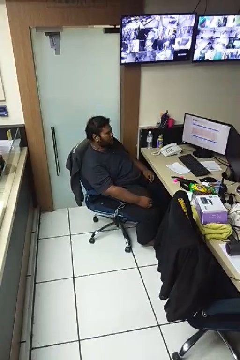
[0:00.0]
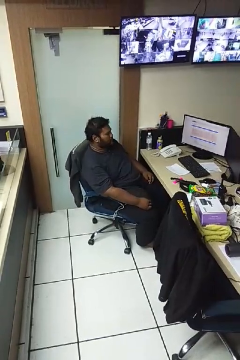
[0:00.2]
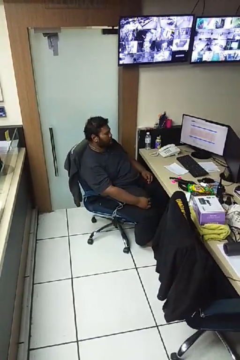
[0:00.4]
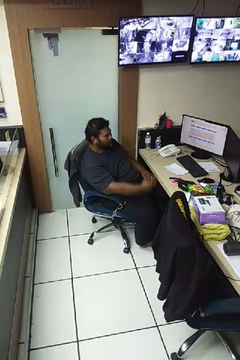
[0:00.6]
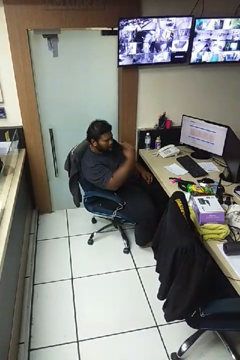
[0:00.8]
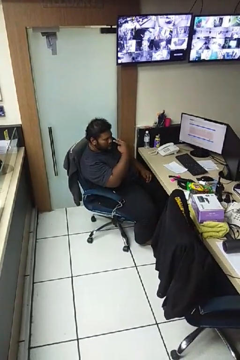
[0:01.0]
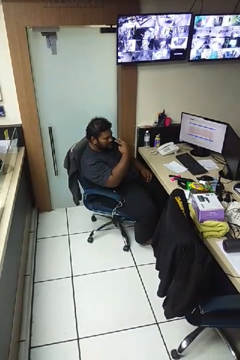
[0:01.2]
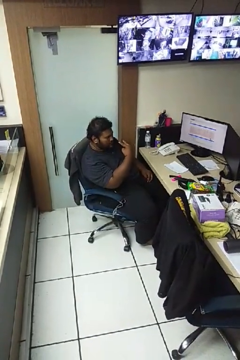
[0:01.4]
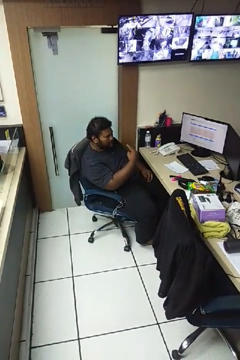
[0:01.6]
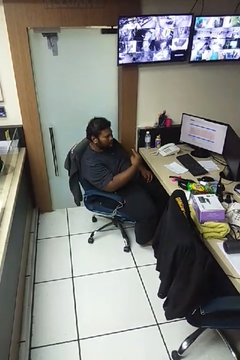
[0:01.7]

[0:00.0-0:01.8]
person gestures watch closely

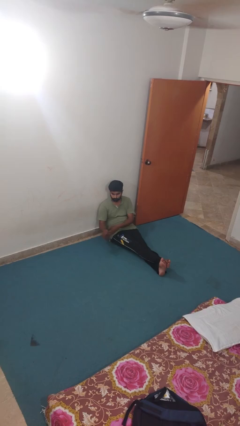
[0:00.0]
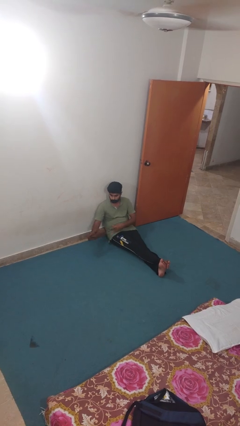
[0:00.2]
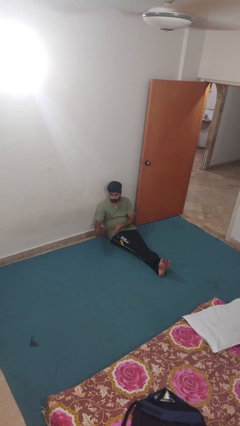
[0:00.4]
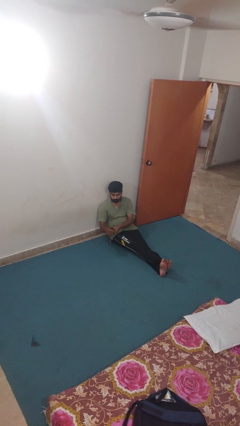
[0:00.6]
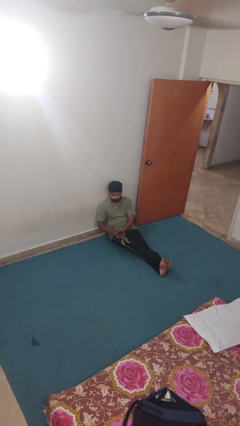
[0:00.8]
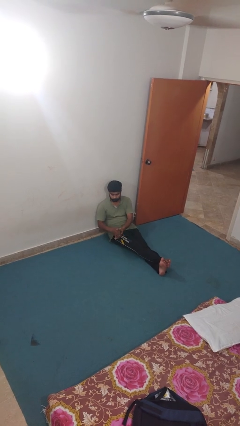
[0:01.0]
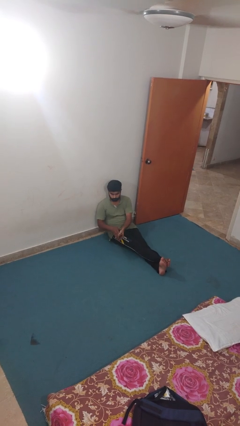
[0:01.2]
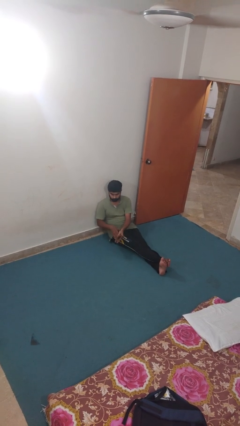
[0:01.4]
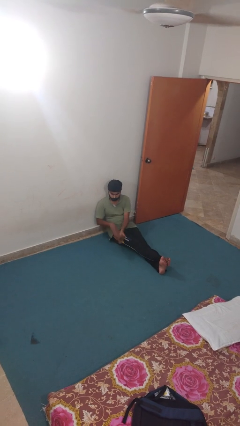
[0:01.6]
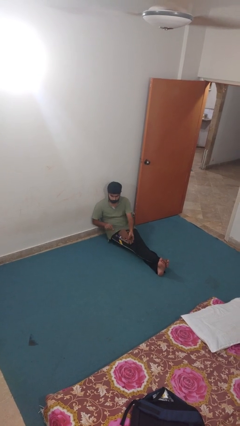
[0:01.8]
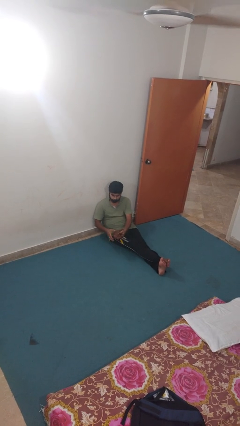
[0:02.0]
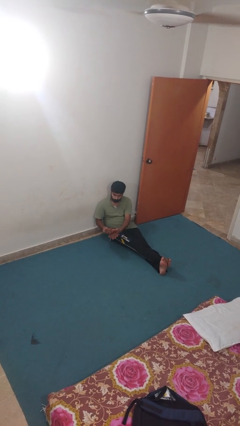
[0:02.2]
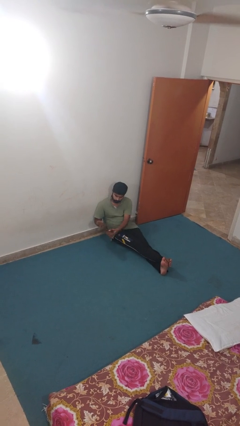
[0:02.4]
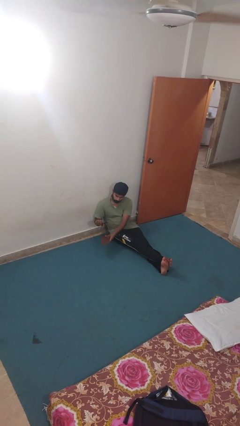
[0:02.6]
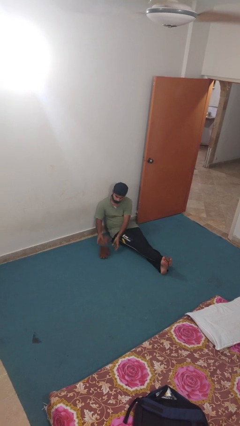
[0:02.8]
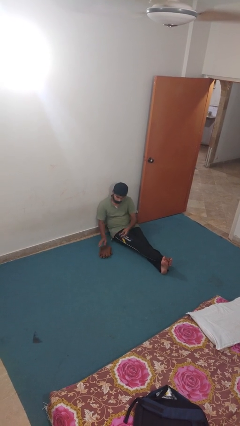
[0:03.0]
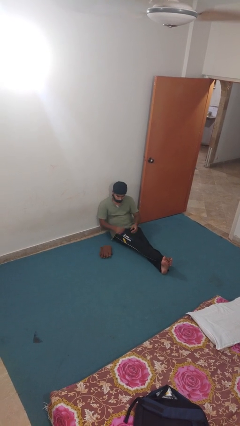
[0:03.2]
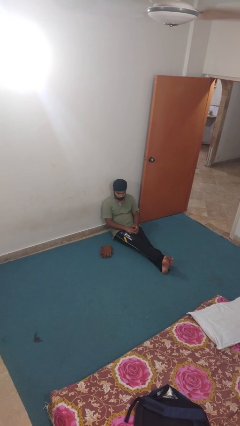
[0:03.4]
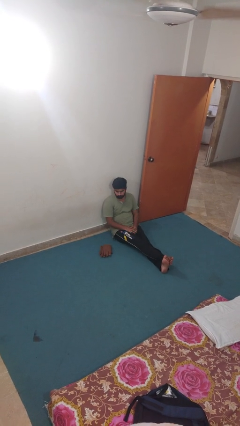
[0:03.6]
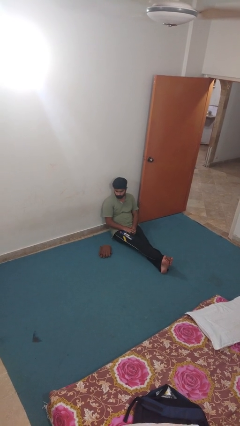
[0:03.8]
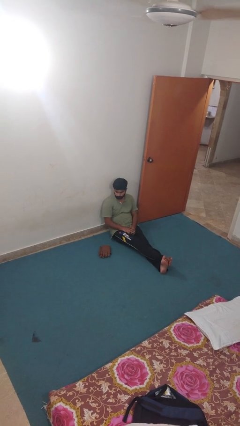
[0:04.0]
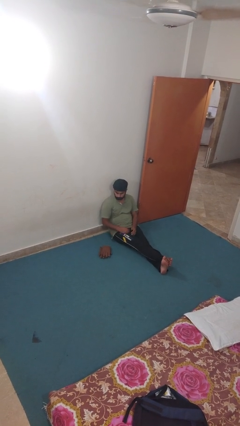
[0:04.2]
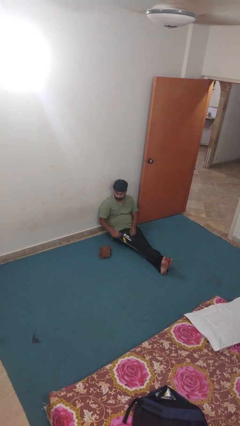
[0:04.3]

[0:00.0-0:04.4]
person takes off gloves

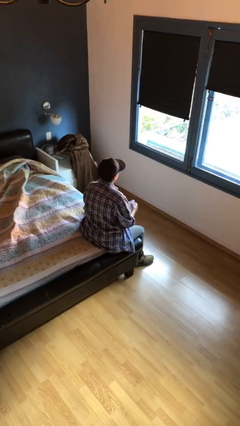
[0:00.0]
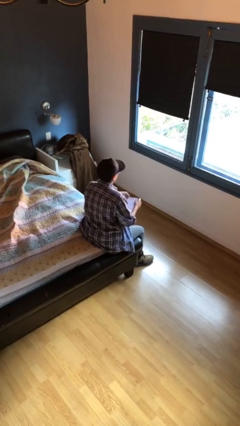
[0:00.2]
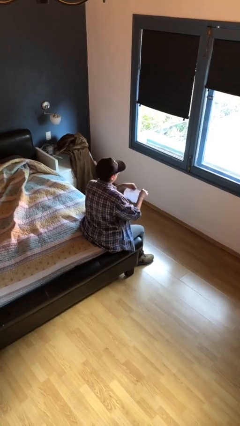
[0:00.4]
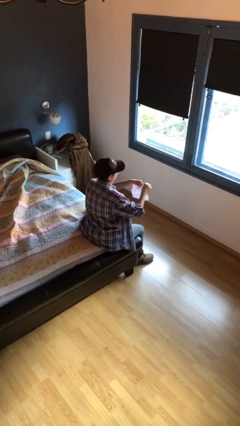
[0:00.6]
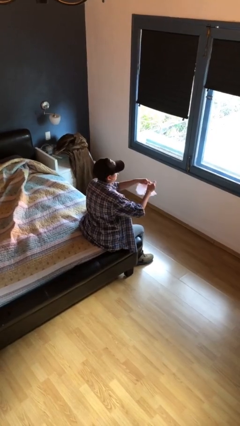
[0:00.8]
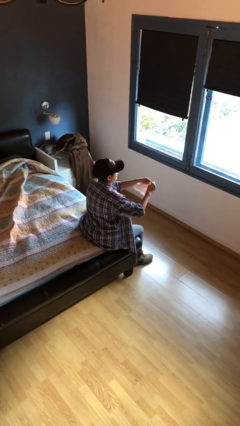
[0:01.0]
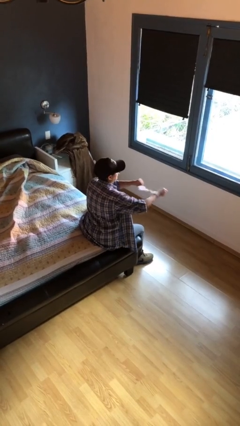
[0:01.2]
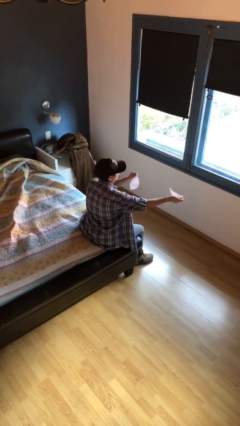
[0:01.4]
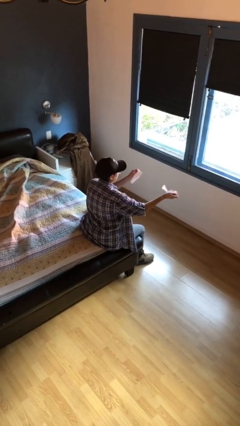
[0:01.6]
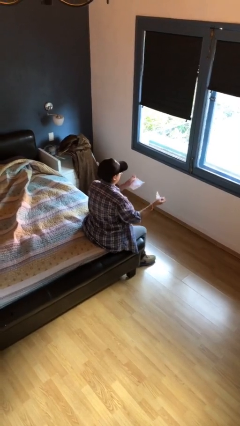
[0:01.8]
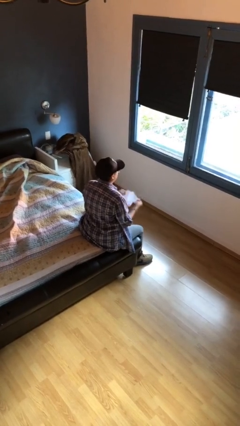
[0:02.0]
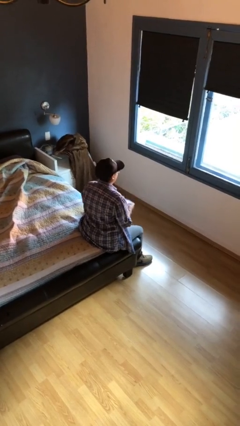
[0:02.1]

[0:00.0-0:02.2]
person tears paper

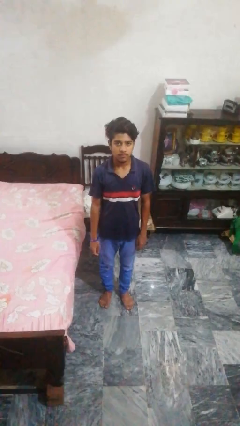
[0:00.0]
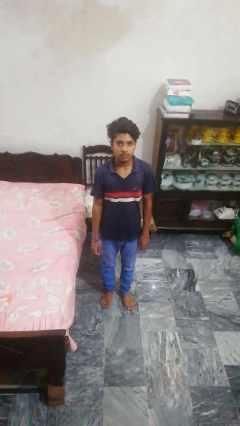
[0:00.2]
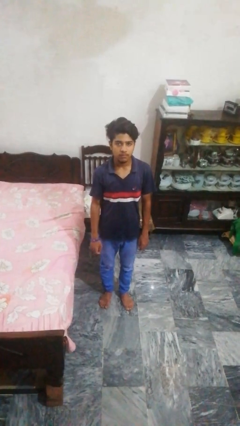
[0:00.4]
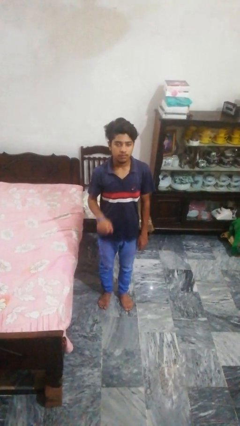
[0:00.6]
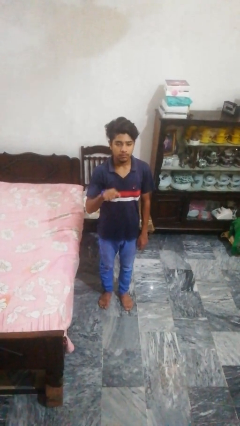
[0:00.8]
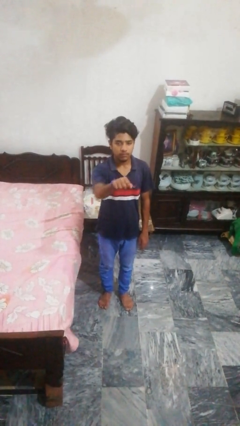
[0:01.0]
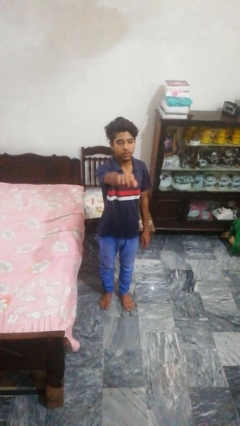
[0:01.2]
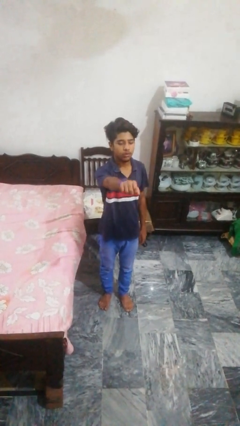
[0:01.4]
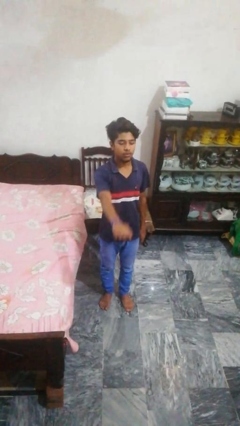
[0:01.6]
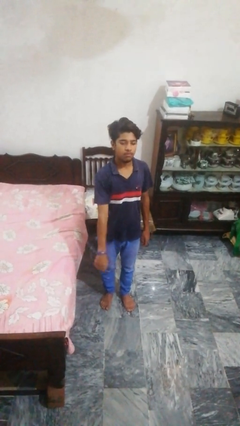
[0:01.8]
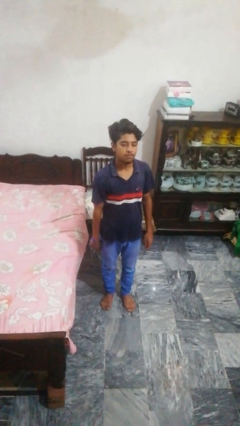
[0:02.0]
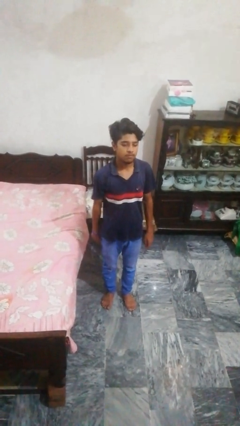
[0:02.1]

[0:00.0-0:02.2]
person punches

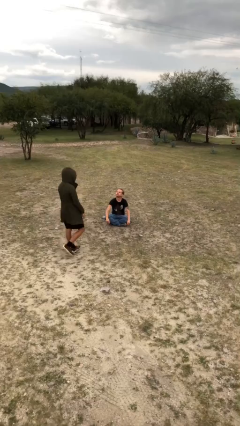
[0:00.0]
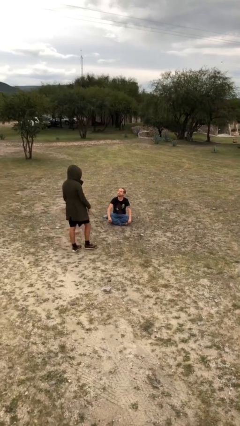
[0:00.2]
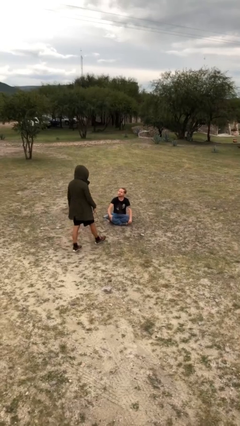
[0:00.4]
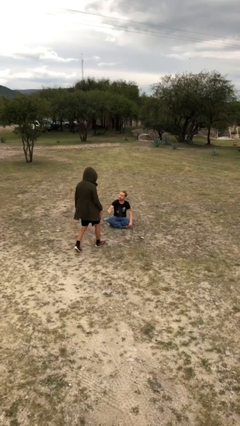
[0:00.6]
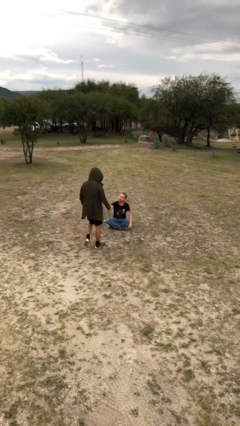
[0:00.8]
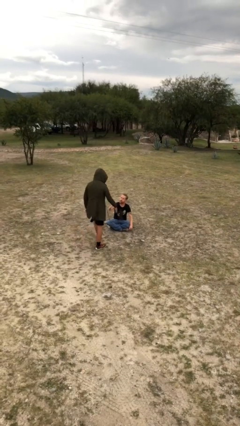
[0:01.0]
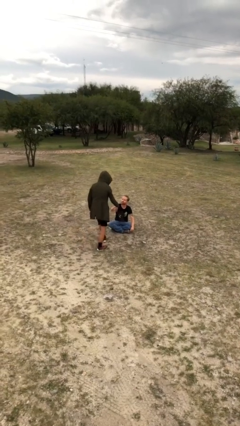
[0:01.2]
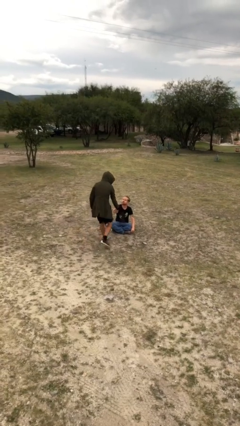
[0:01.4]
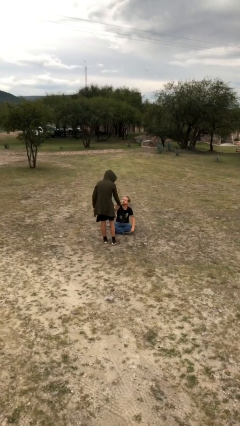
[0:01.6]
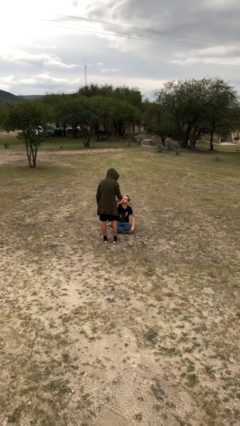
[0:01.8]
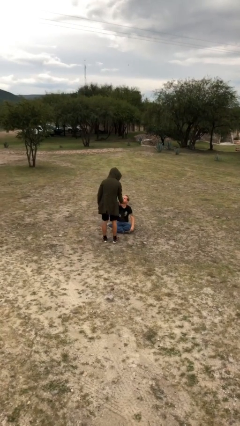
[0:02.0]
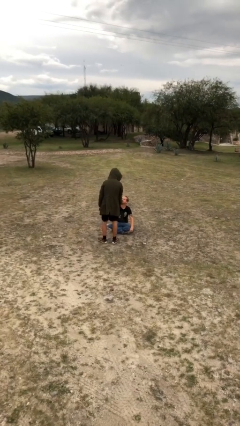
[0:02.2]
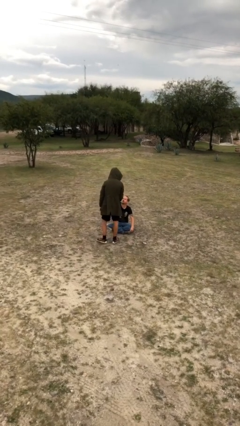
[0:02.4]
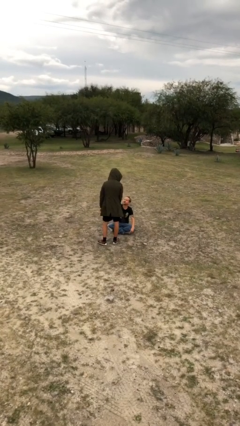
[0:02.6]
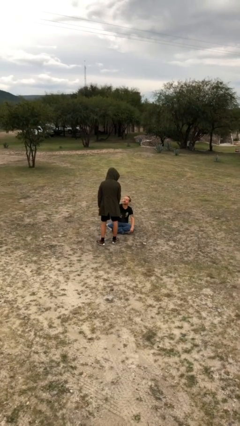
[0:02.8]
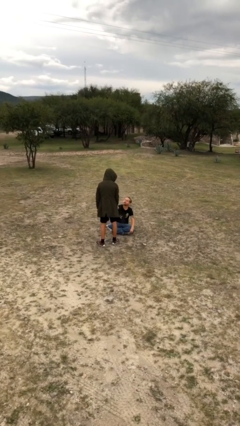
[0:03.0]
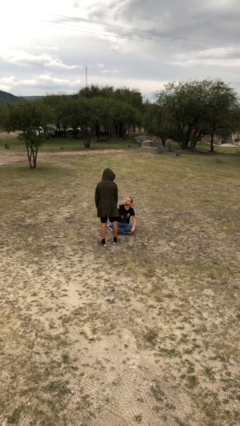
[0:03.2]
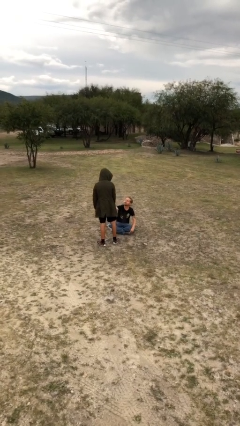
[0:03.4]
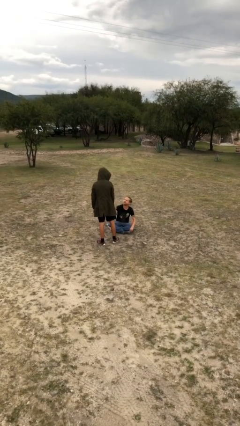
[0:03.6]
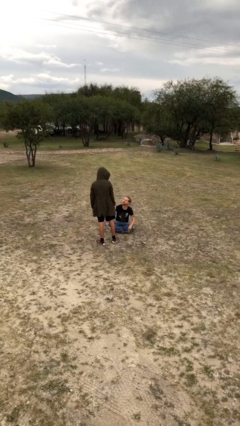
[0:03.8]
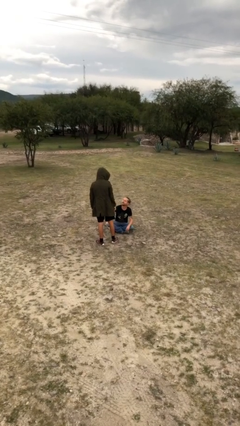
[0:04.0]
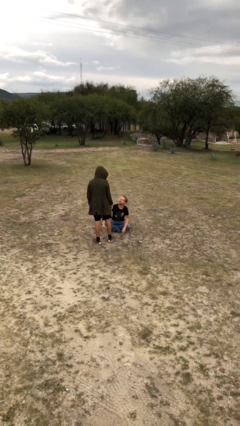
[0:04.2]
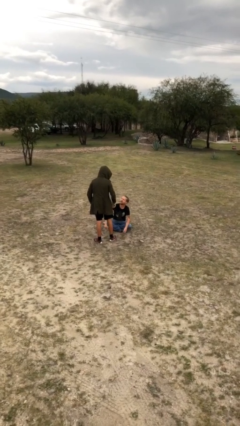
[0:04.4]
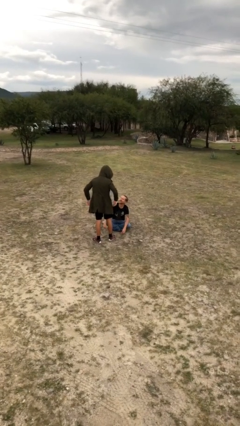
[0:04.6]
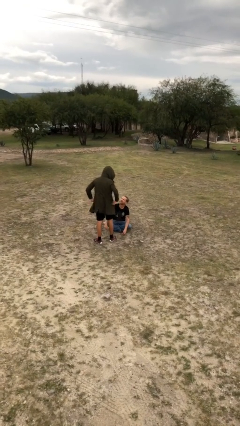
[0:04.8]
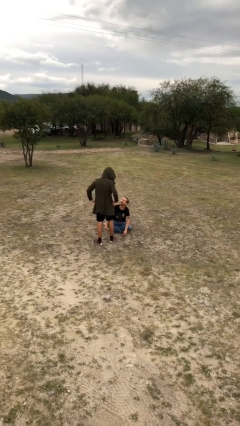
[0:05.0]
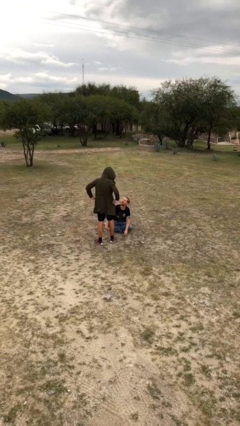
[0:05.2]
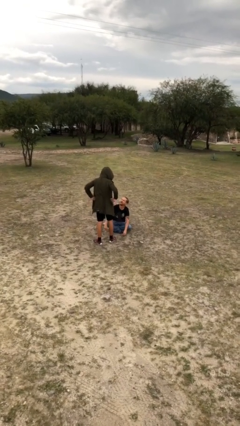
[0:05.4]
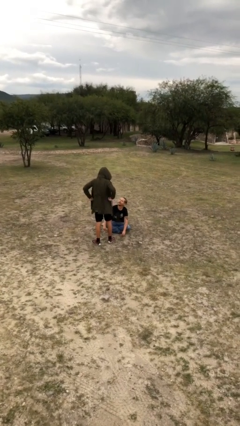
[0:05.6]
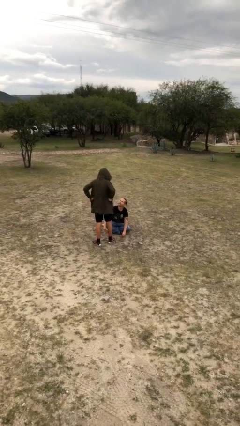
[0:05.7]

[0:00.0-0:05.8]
person shakes hand

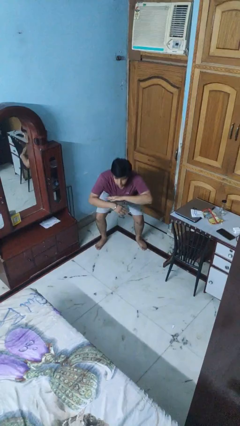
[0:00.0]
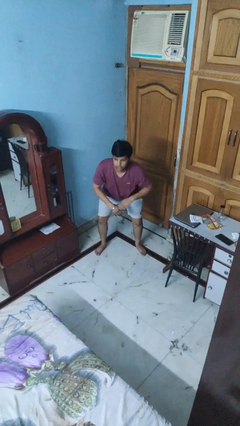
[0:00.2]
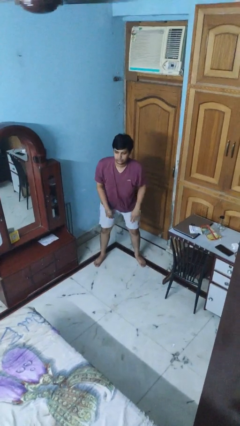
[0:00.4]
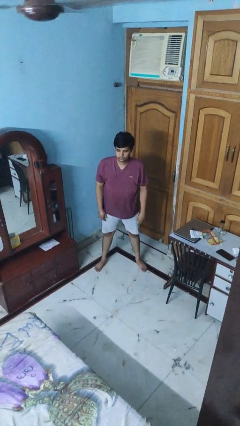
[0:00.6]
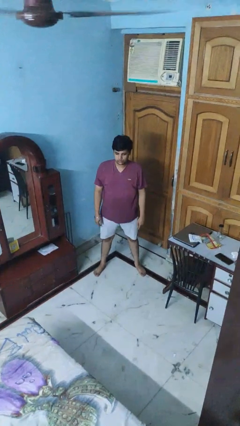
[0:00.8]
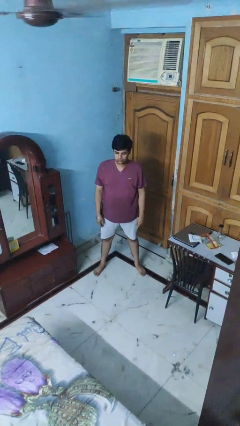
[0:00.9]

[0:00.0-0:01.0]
person stands up

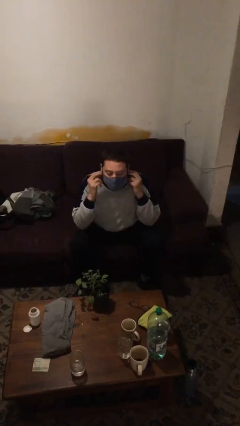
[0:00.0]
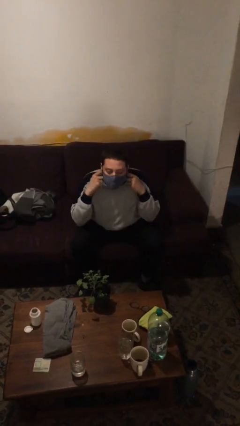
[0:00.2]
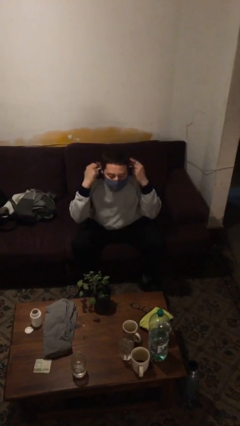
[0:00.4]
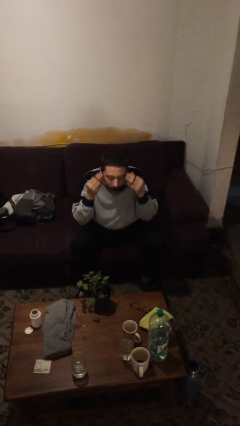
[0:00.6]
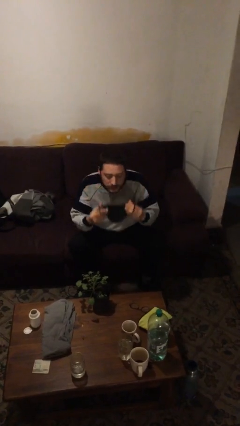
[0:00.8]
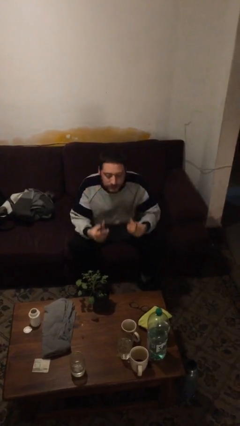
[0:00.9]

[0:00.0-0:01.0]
person takes off facemask
